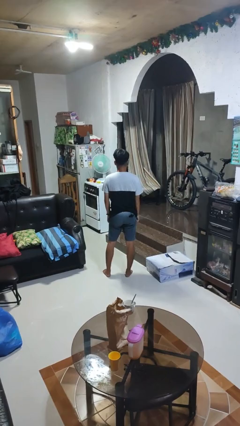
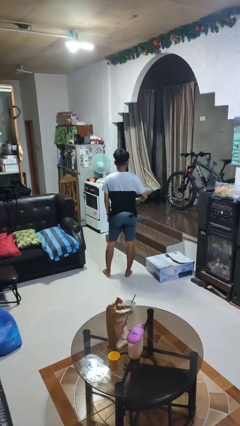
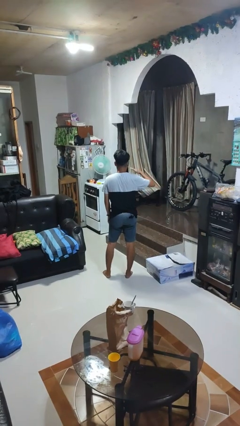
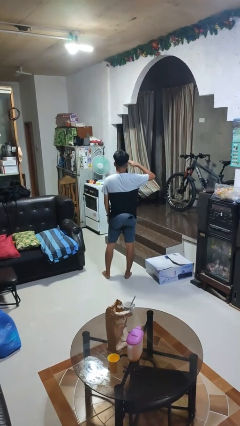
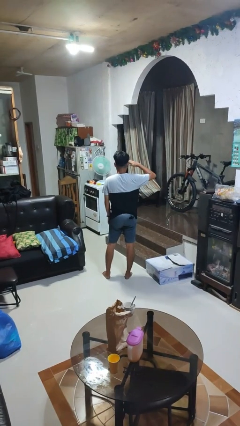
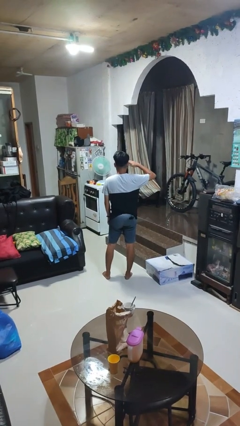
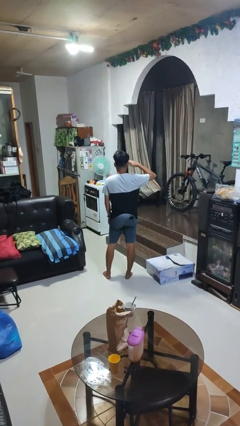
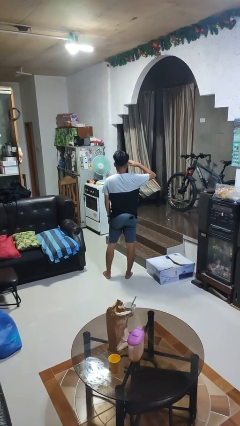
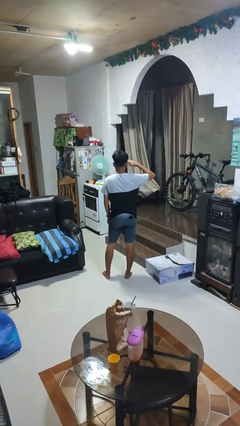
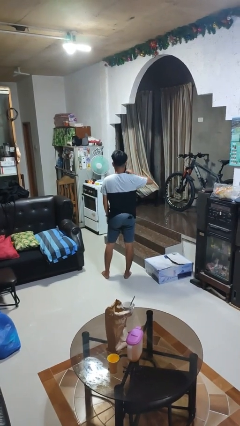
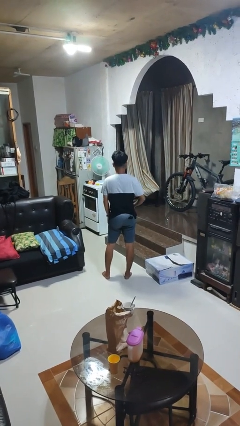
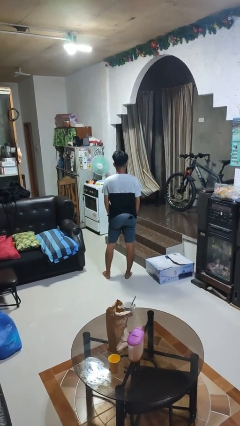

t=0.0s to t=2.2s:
person salutes

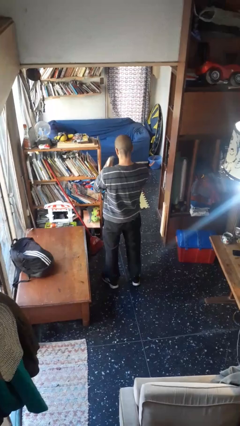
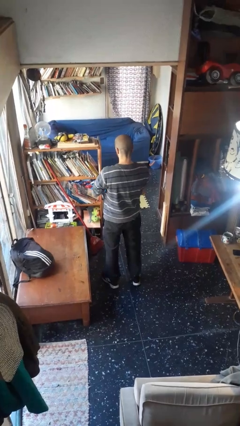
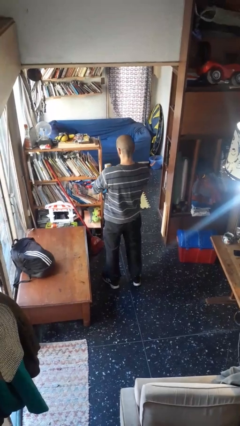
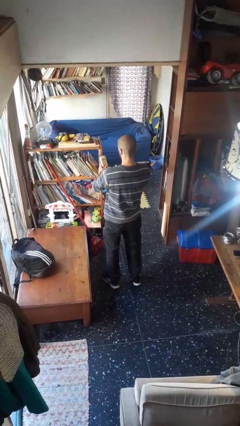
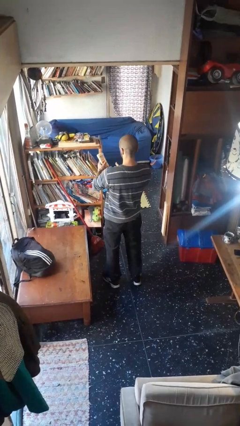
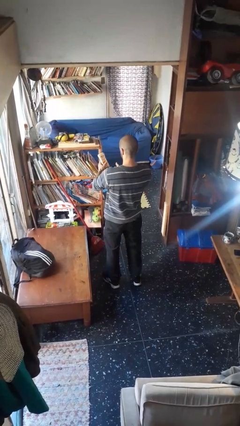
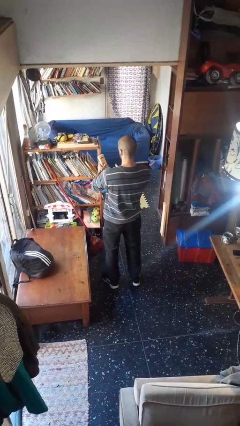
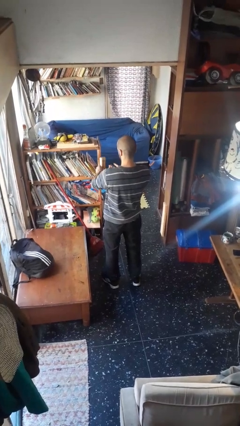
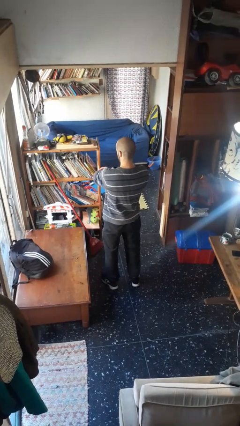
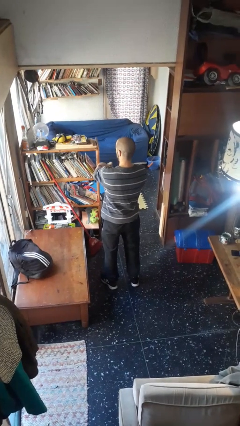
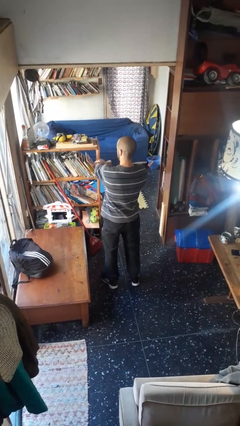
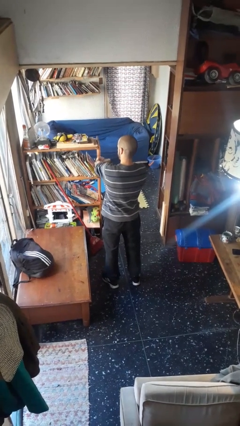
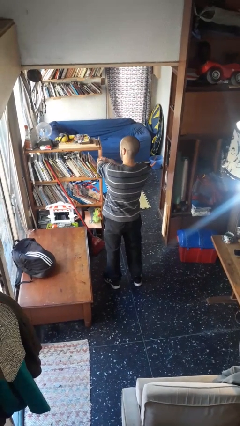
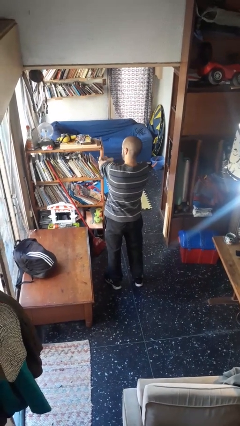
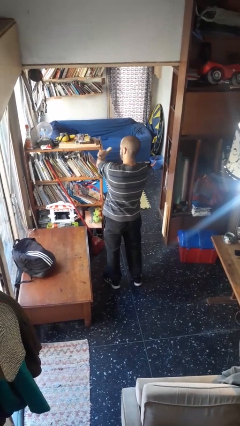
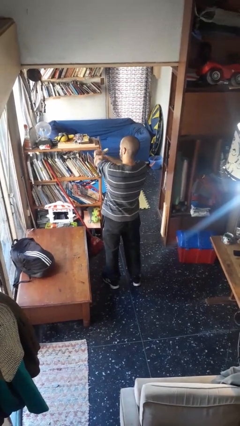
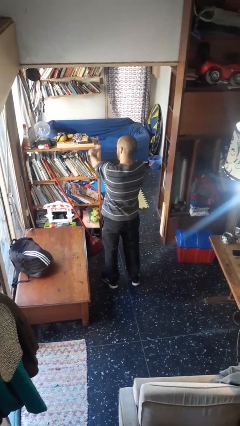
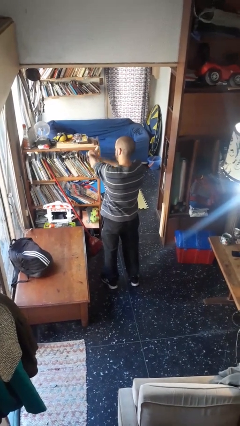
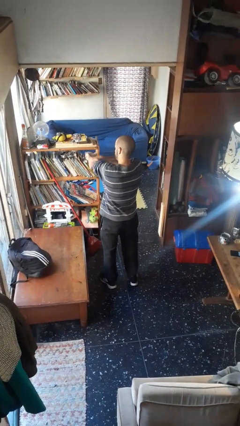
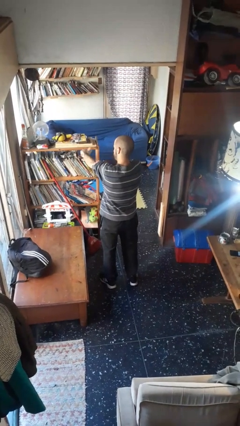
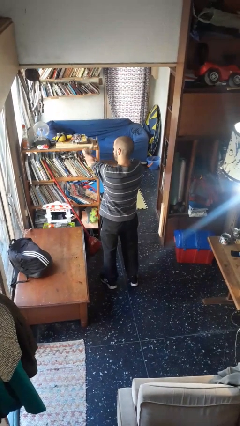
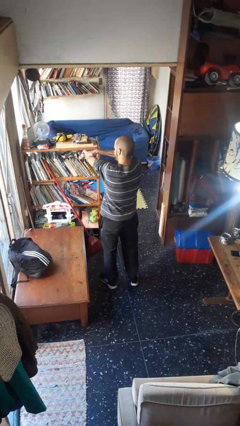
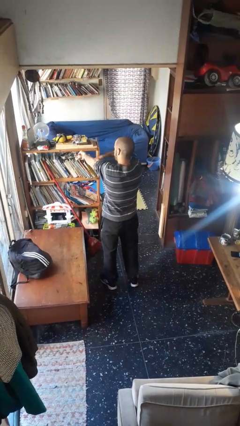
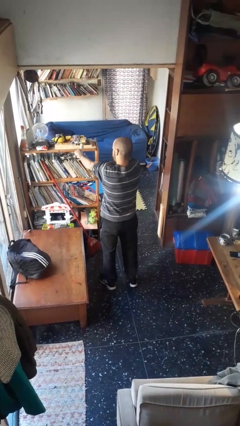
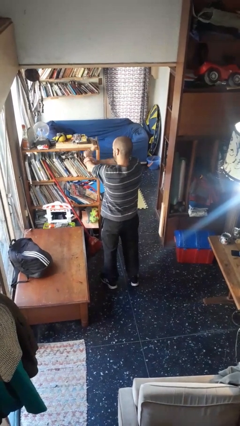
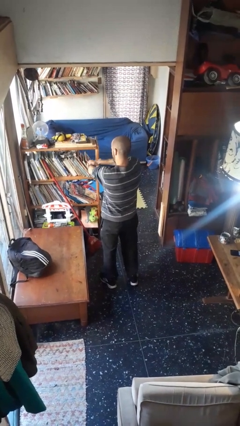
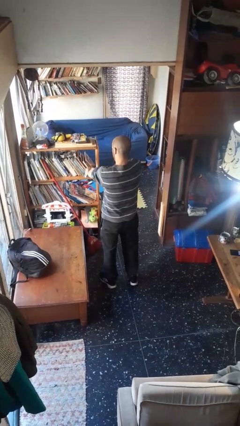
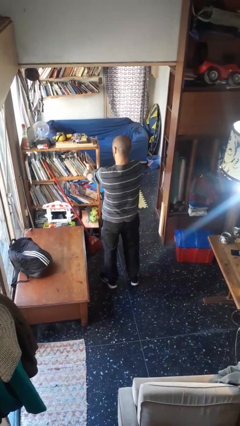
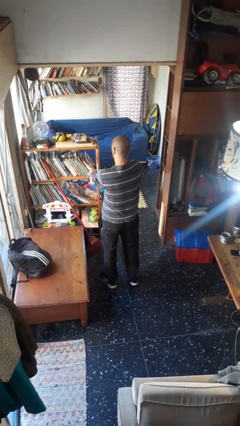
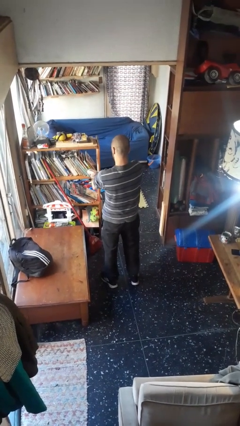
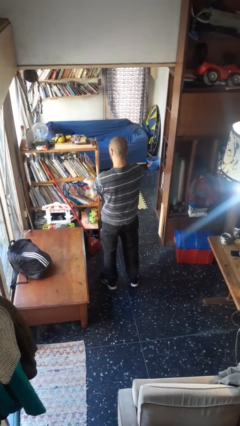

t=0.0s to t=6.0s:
person applies sunscreen

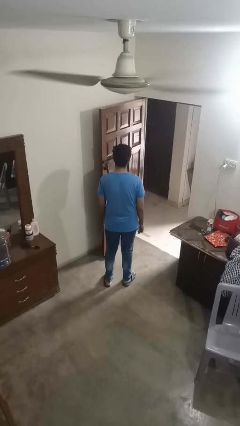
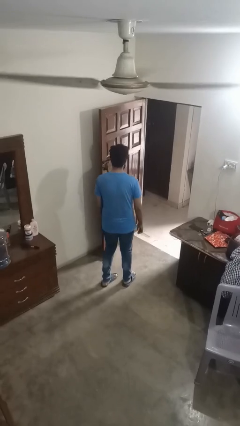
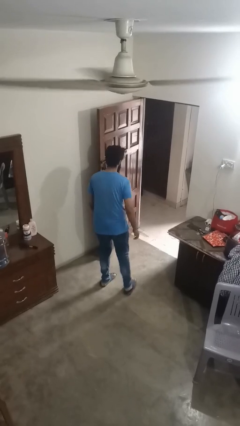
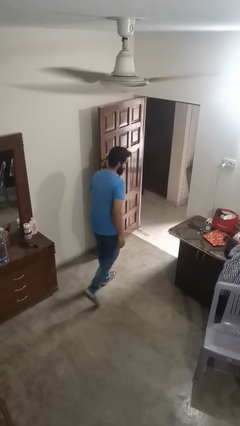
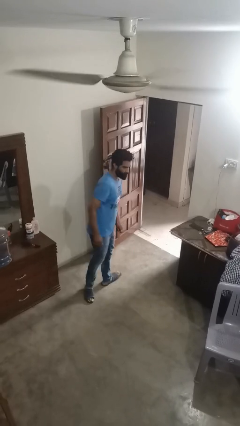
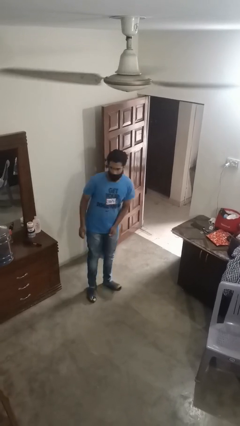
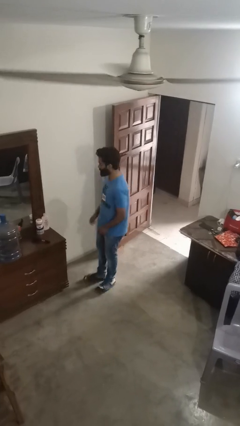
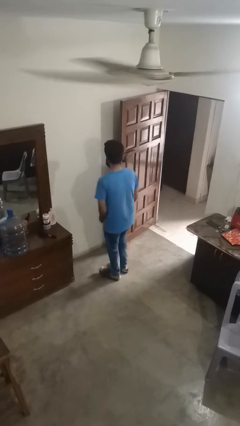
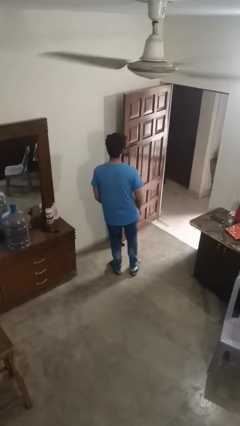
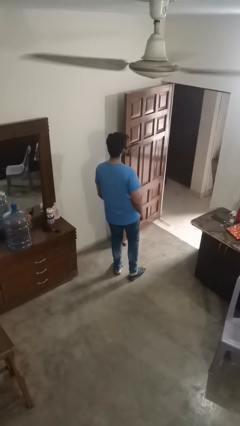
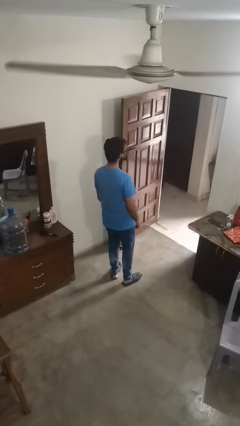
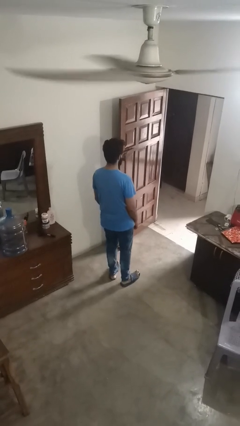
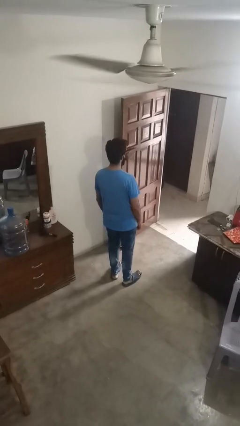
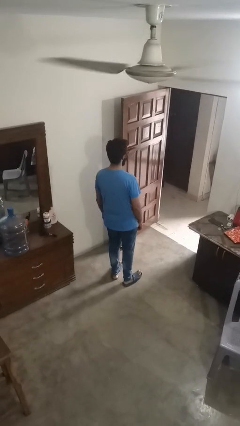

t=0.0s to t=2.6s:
person twirls

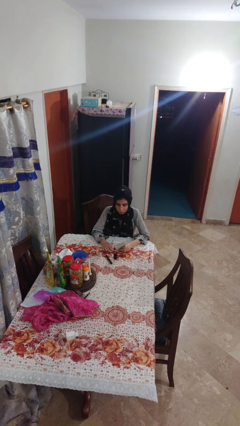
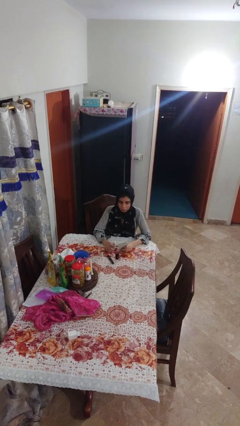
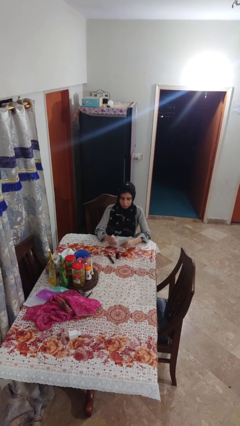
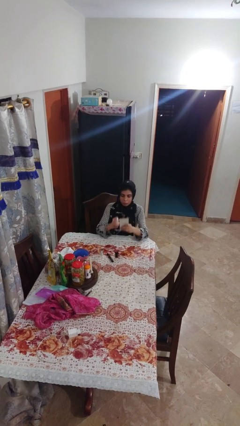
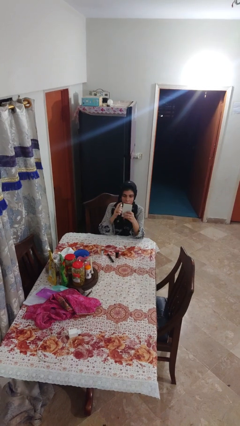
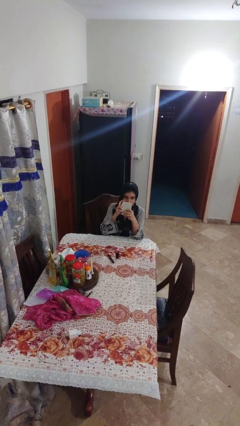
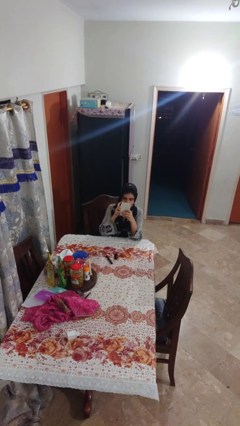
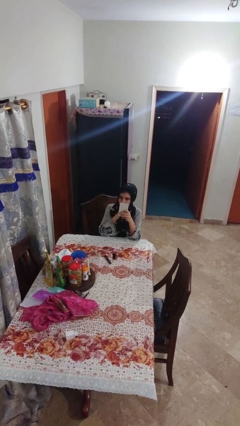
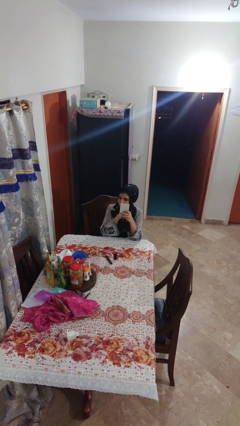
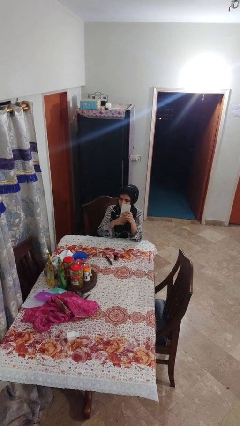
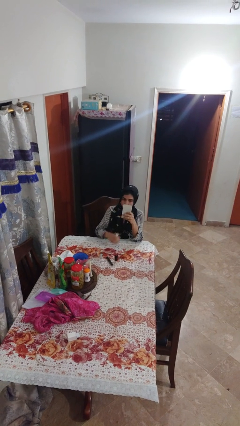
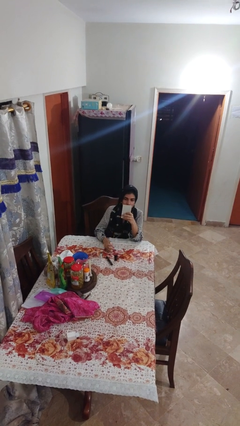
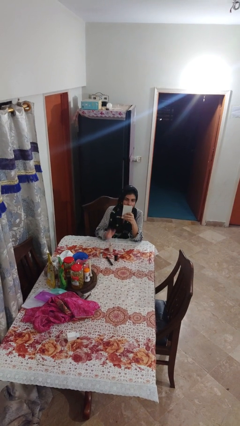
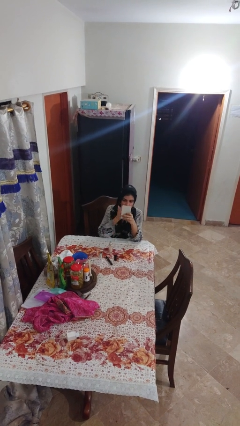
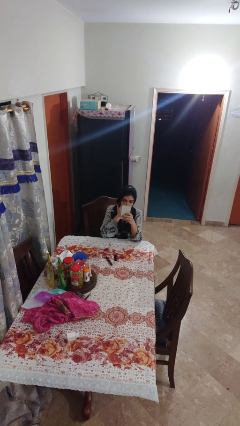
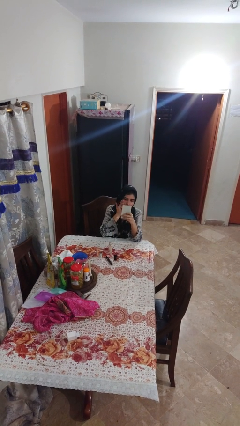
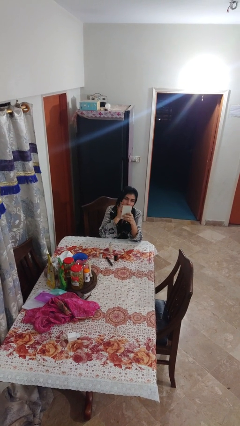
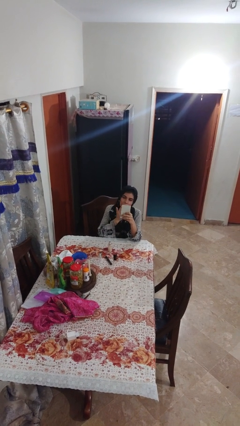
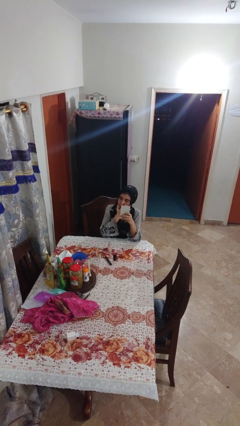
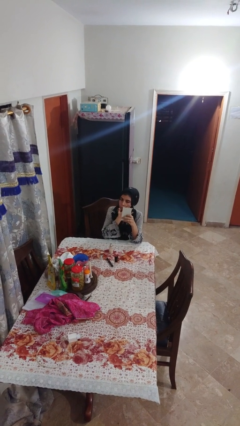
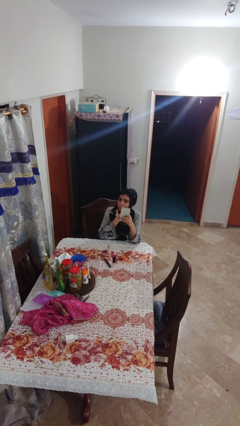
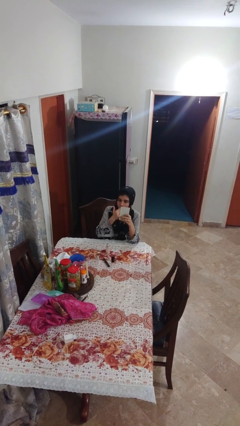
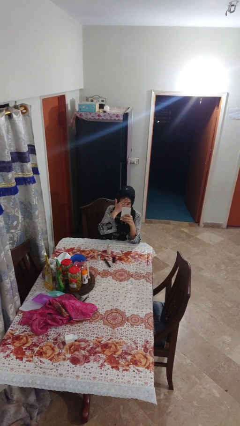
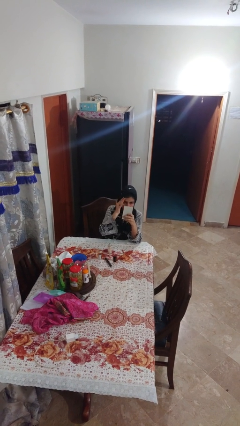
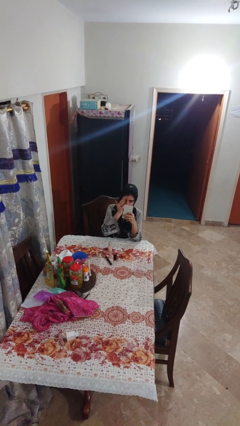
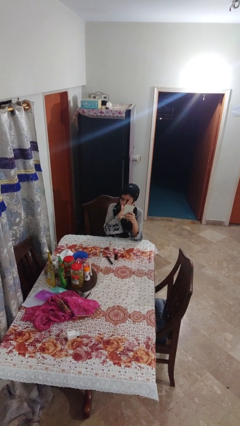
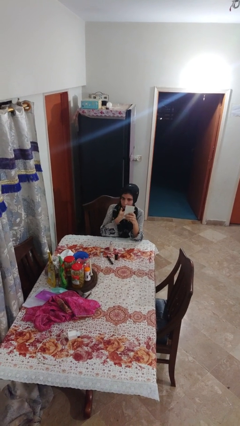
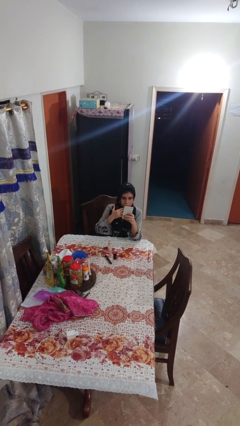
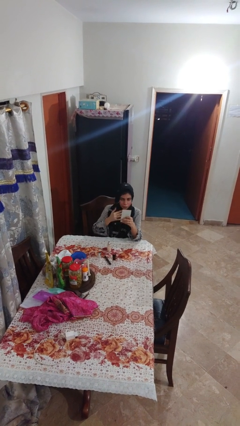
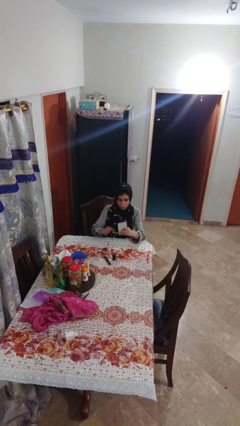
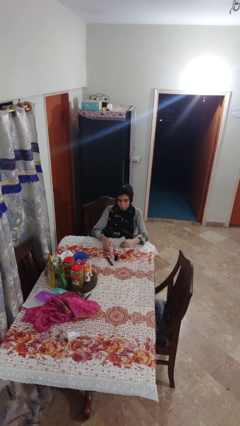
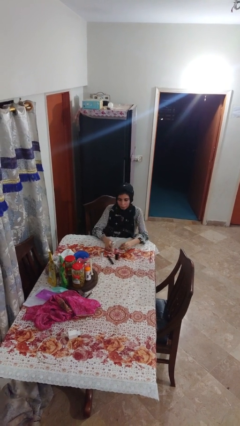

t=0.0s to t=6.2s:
person applies foundation makeup

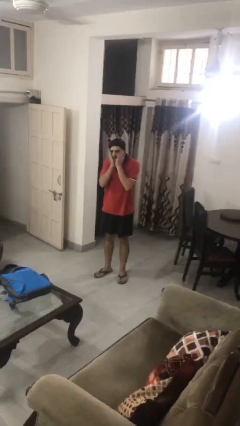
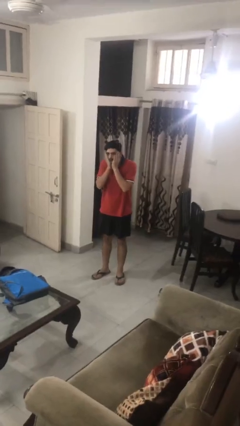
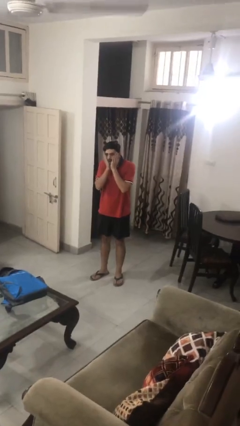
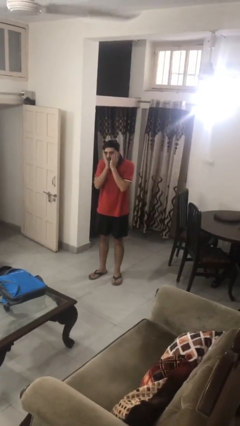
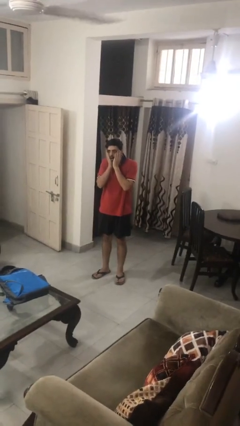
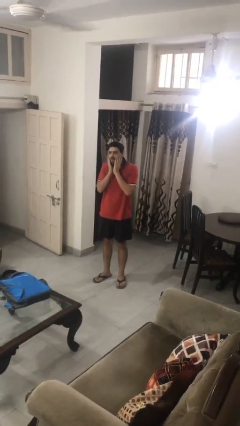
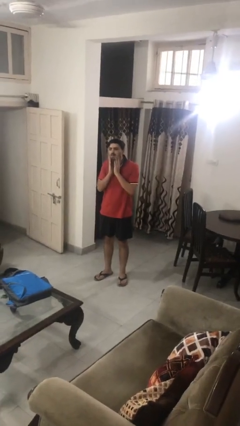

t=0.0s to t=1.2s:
person covers face with hands
